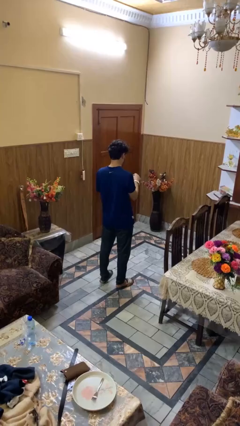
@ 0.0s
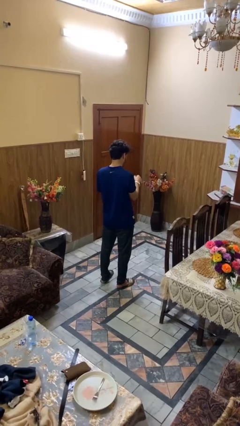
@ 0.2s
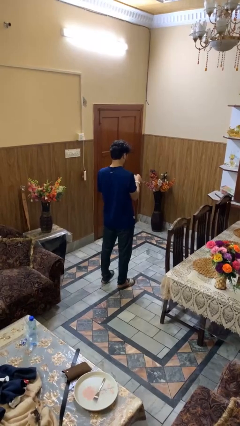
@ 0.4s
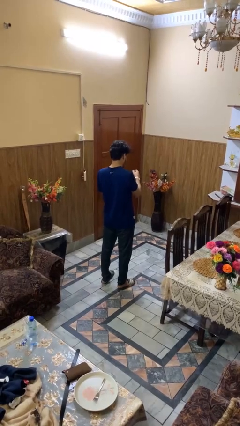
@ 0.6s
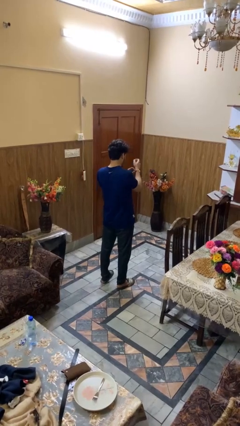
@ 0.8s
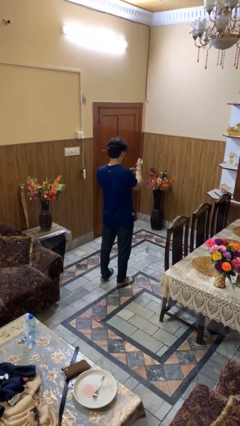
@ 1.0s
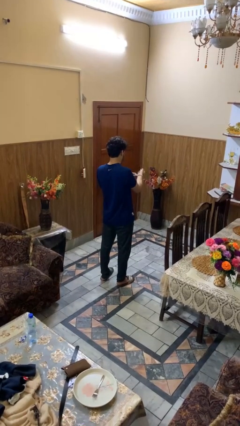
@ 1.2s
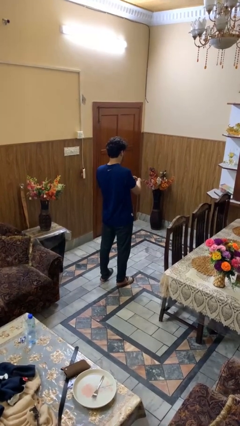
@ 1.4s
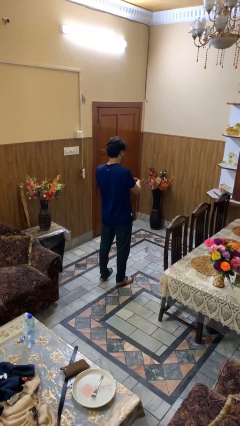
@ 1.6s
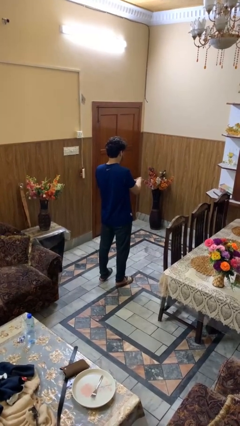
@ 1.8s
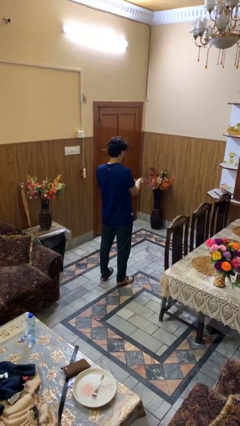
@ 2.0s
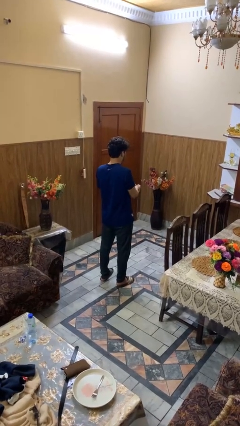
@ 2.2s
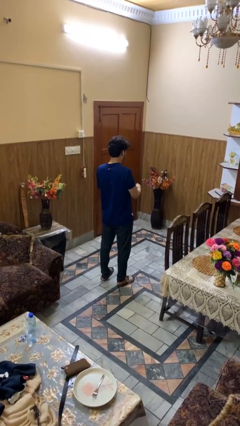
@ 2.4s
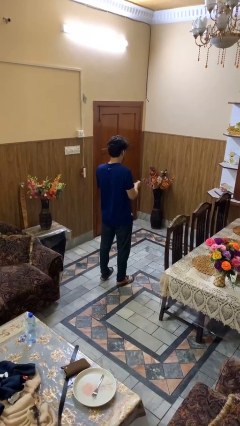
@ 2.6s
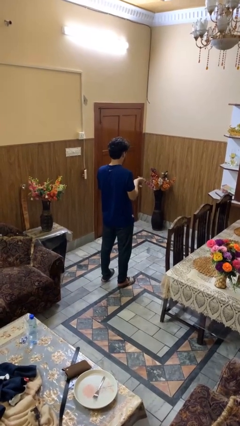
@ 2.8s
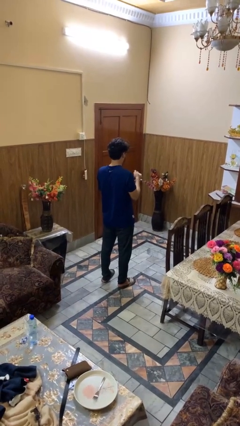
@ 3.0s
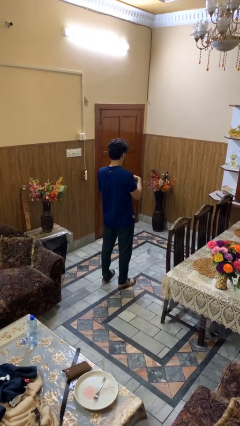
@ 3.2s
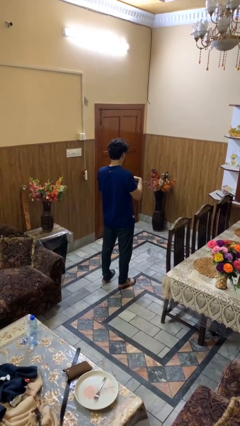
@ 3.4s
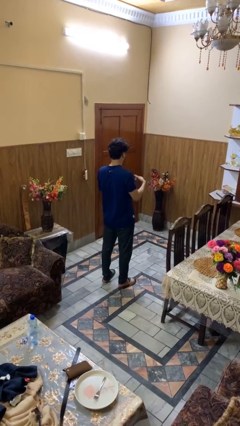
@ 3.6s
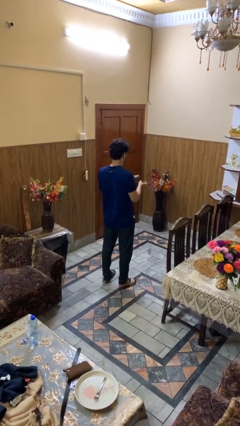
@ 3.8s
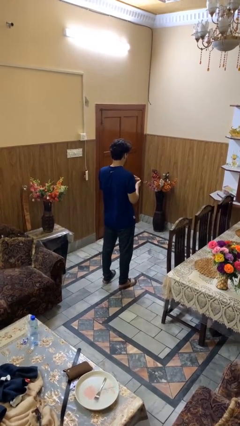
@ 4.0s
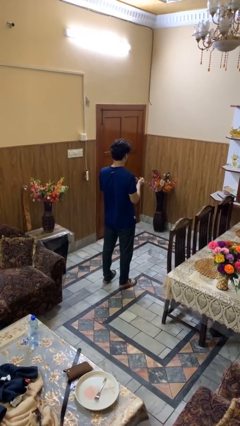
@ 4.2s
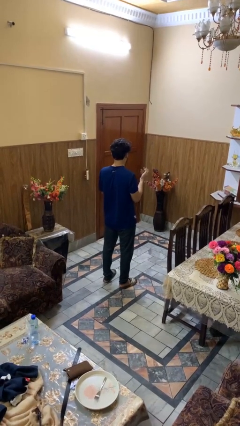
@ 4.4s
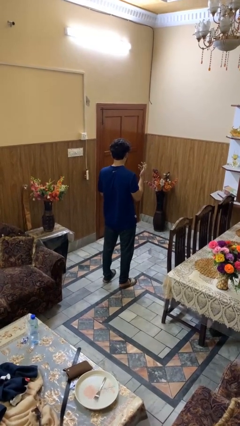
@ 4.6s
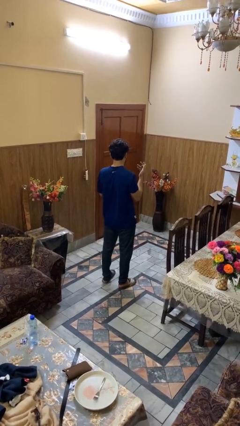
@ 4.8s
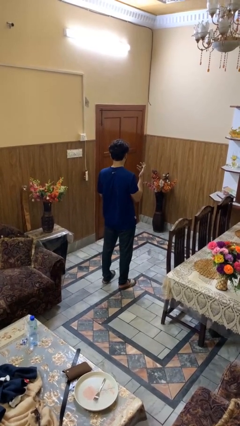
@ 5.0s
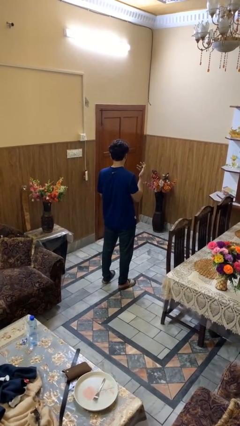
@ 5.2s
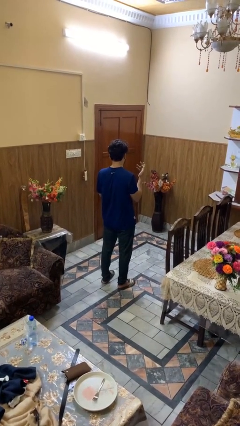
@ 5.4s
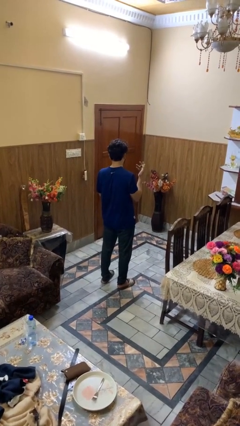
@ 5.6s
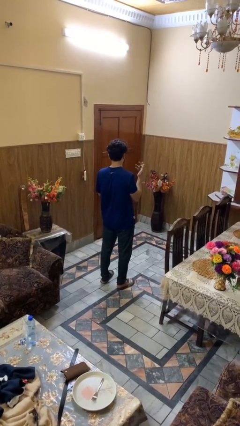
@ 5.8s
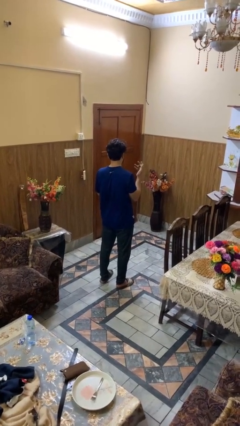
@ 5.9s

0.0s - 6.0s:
person takes off wristwatch

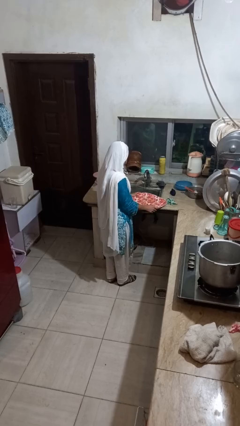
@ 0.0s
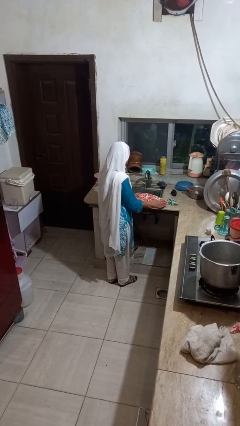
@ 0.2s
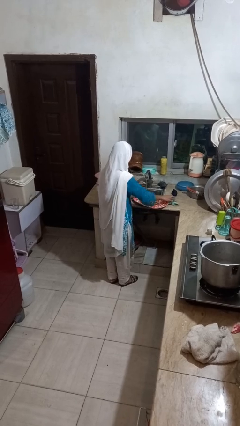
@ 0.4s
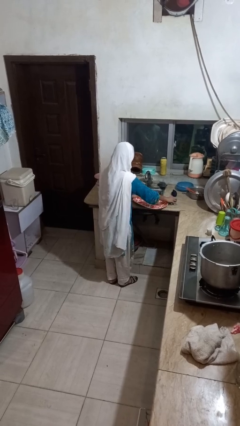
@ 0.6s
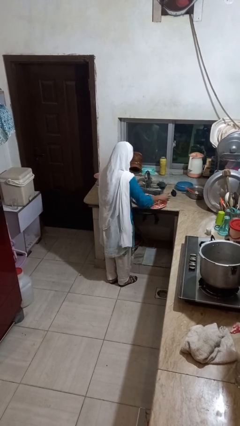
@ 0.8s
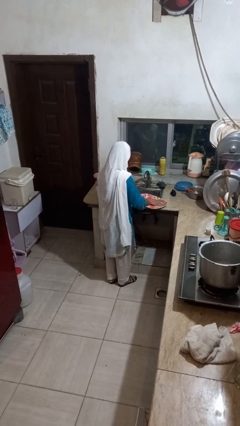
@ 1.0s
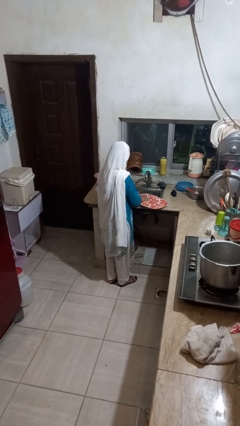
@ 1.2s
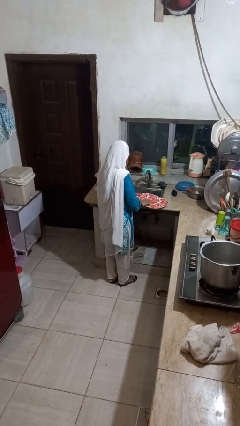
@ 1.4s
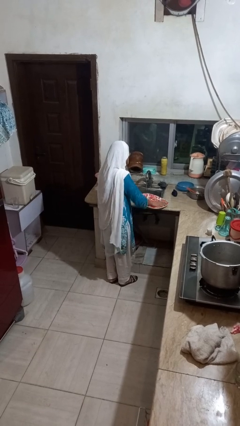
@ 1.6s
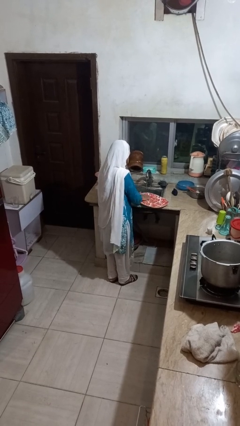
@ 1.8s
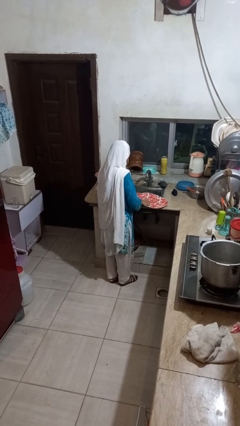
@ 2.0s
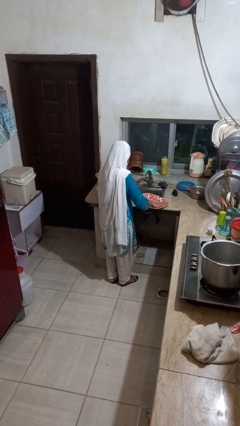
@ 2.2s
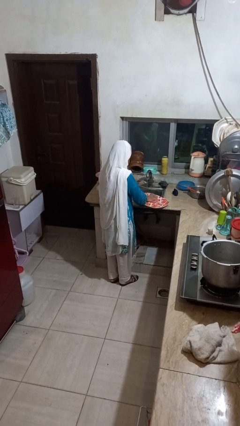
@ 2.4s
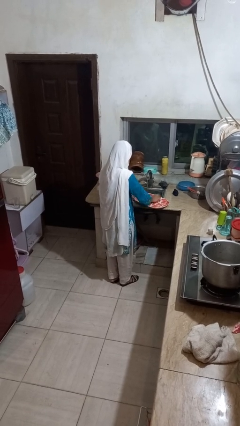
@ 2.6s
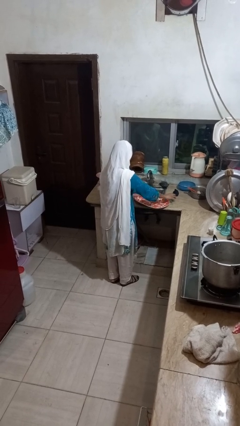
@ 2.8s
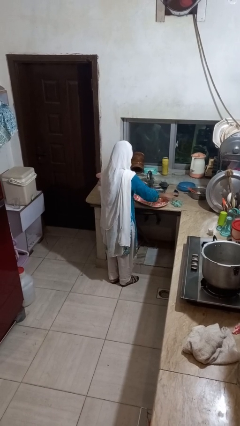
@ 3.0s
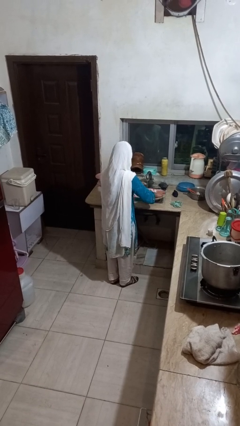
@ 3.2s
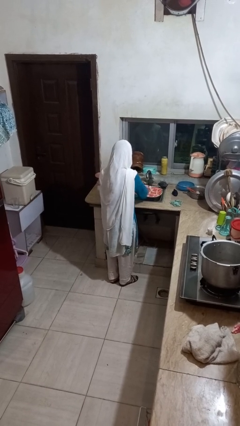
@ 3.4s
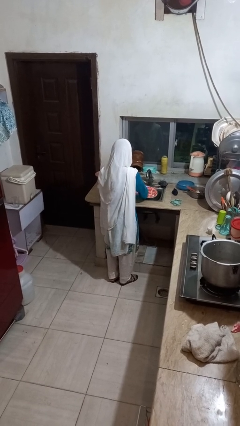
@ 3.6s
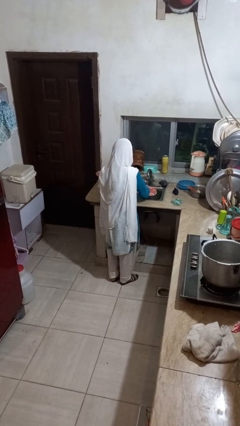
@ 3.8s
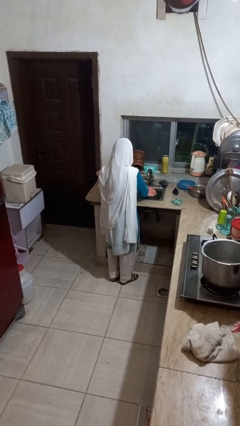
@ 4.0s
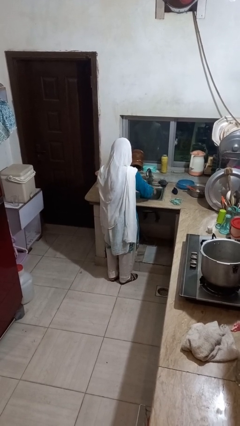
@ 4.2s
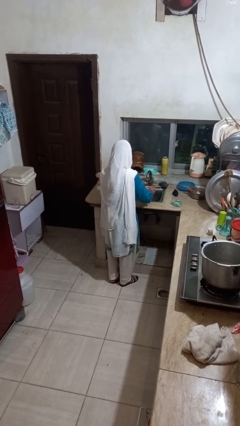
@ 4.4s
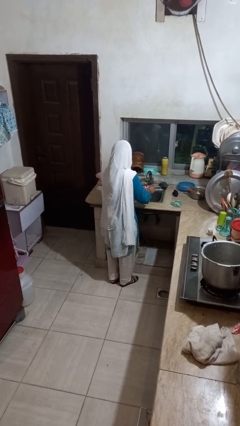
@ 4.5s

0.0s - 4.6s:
person washes dish

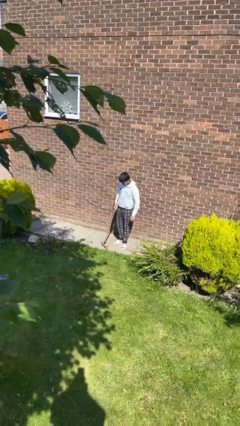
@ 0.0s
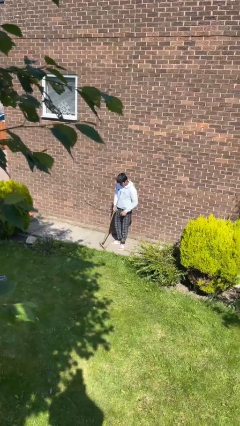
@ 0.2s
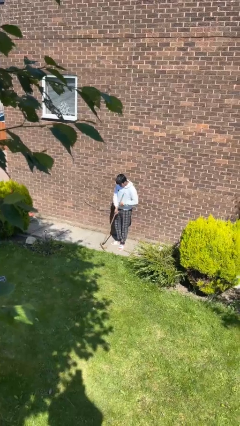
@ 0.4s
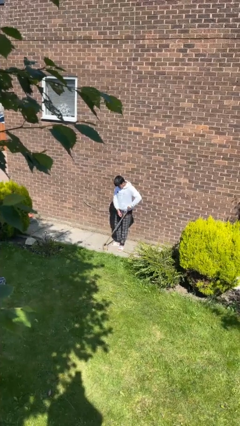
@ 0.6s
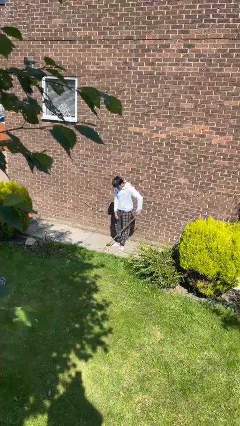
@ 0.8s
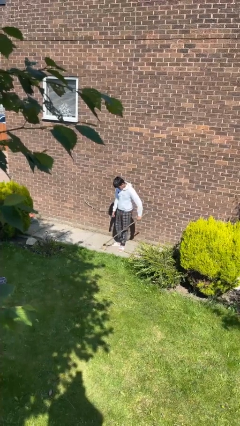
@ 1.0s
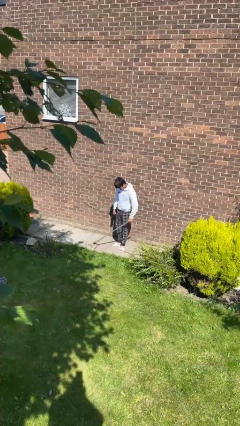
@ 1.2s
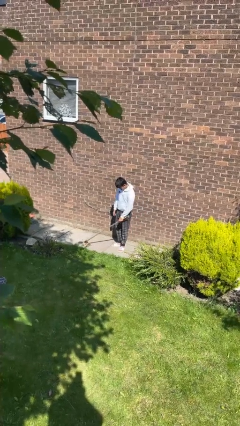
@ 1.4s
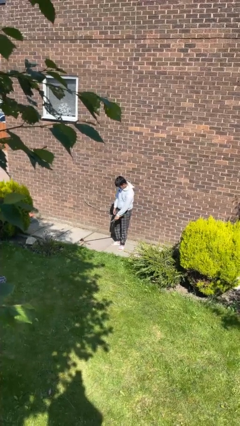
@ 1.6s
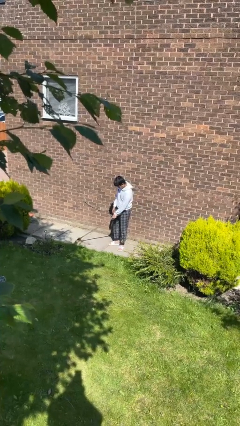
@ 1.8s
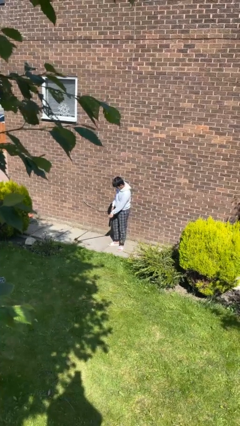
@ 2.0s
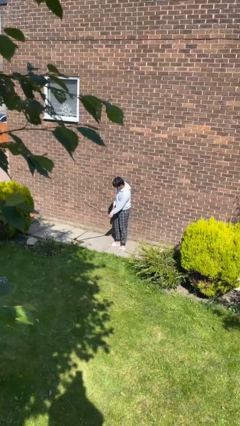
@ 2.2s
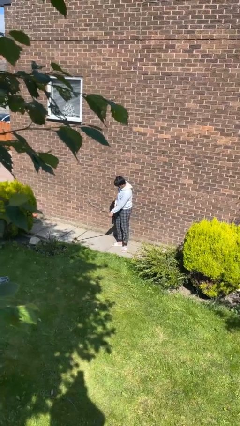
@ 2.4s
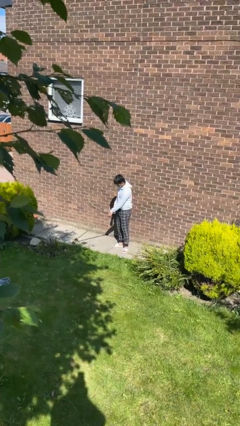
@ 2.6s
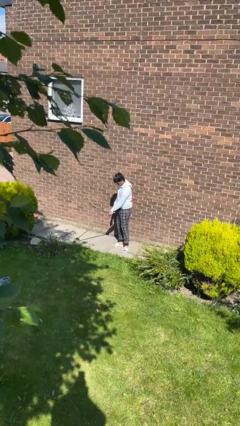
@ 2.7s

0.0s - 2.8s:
person sweeps floor

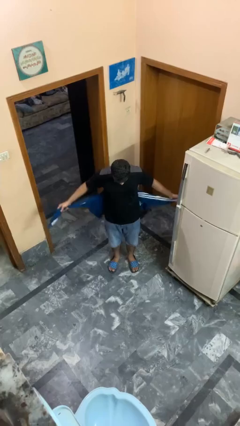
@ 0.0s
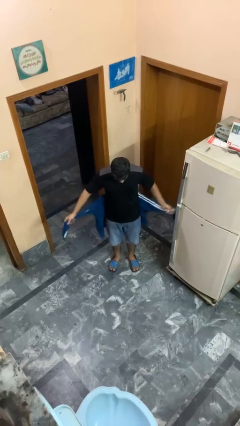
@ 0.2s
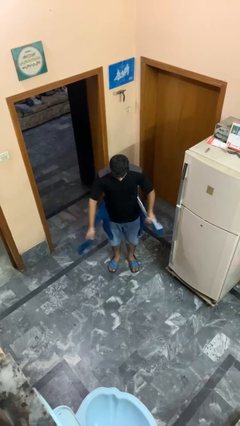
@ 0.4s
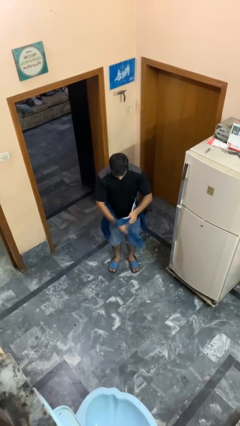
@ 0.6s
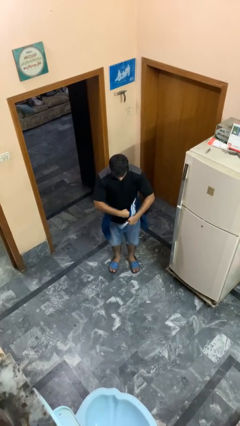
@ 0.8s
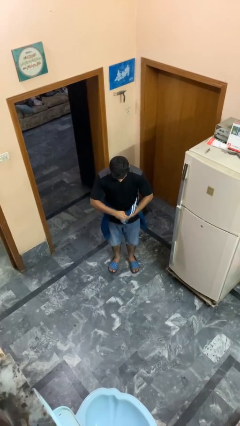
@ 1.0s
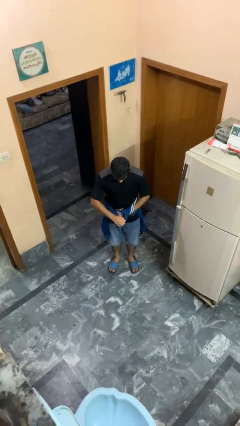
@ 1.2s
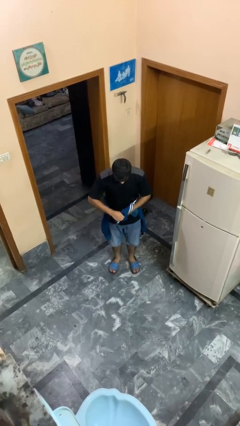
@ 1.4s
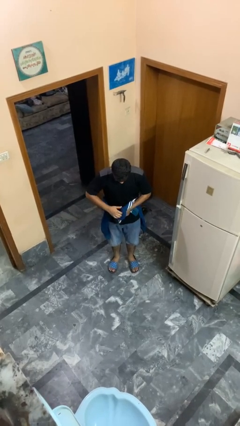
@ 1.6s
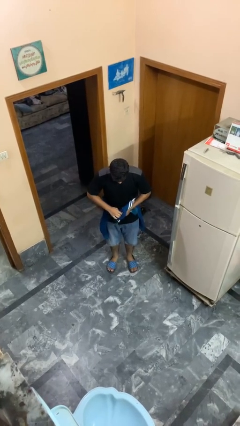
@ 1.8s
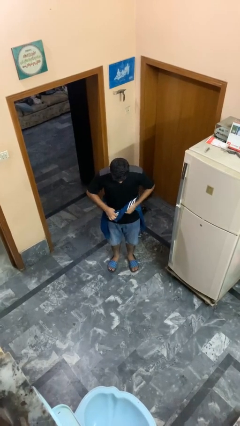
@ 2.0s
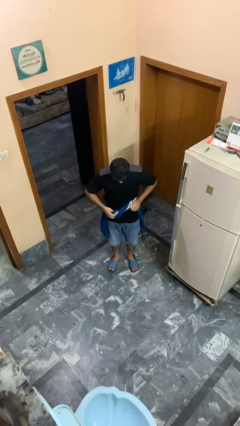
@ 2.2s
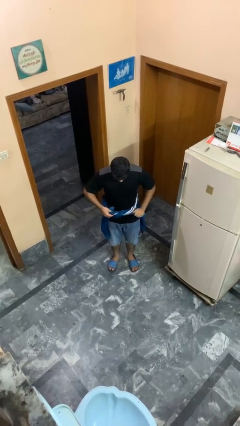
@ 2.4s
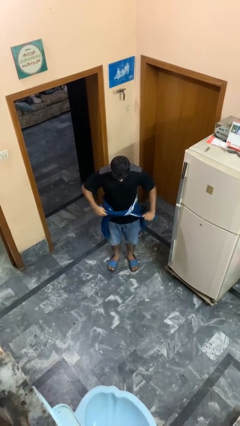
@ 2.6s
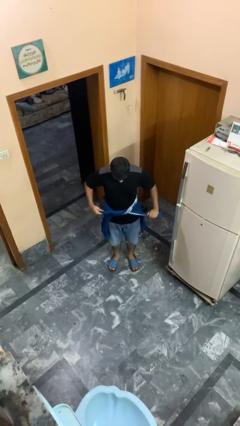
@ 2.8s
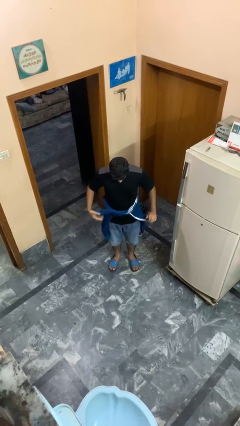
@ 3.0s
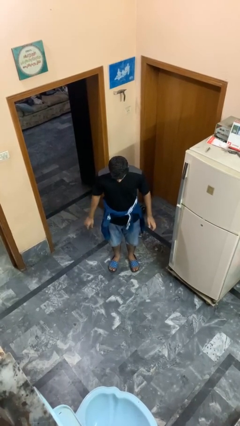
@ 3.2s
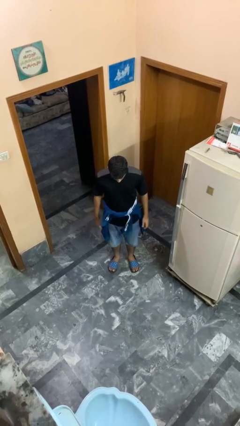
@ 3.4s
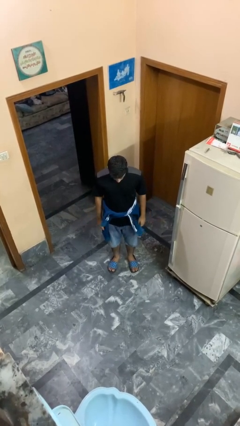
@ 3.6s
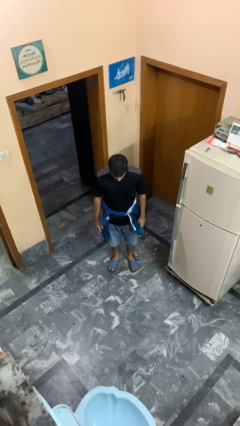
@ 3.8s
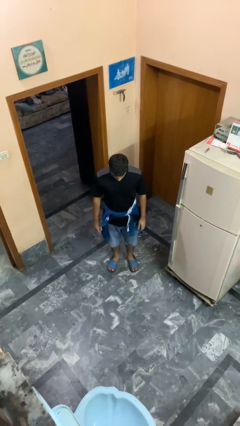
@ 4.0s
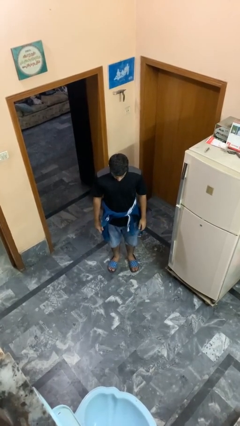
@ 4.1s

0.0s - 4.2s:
person ties jacket around waist

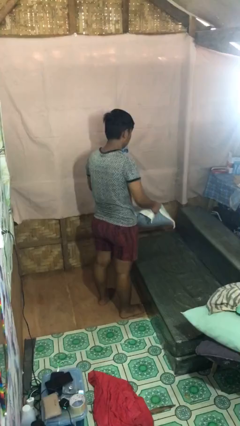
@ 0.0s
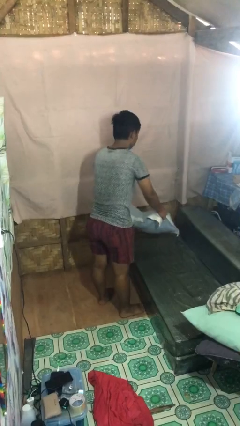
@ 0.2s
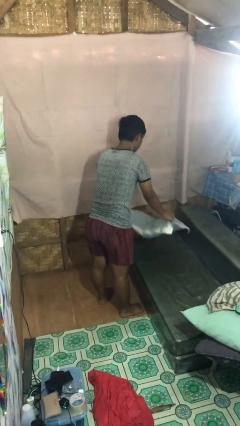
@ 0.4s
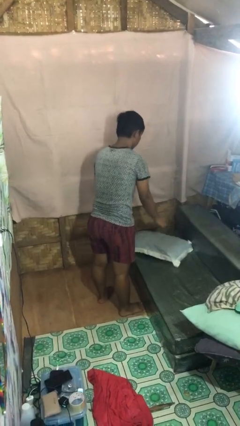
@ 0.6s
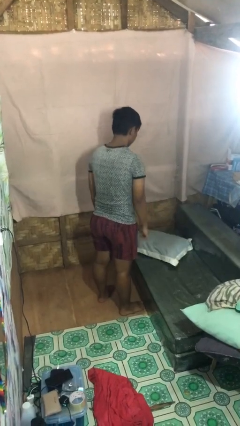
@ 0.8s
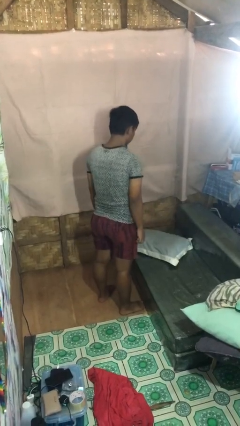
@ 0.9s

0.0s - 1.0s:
person puts down object on couch
